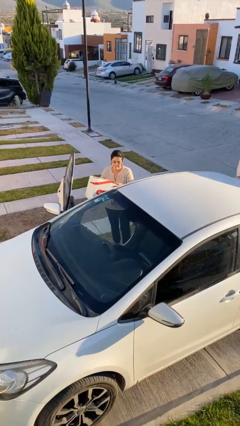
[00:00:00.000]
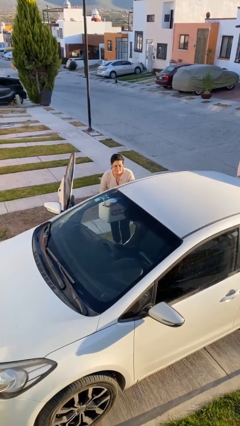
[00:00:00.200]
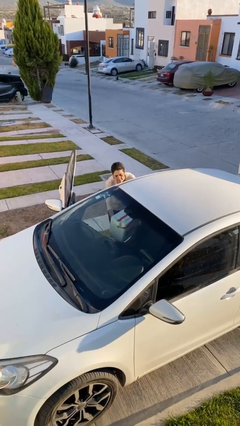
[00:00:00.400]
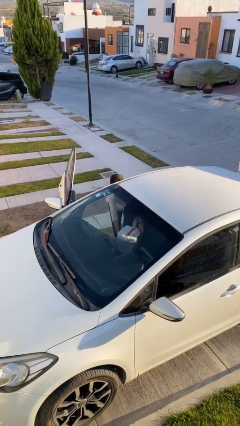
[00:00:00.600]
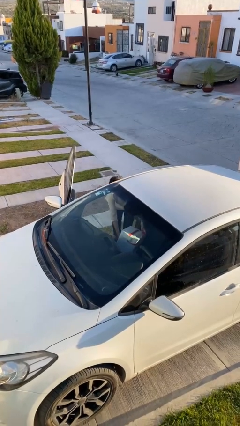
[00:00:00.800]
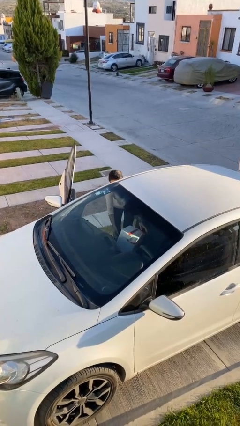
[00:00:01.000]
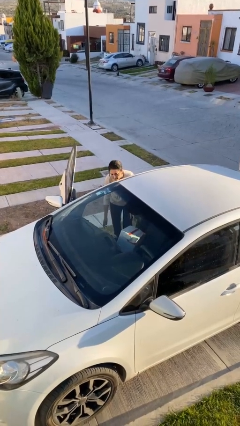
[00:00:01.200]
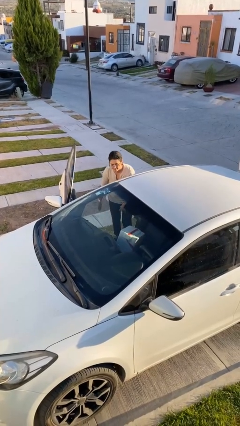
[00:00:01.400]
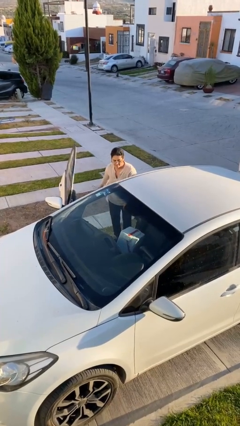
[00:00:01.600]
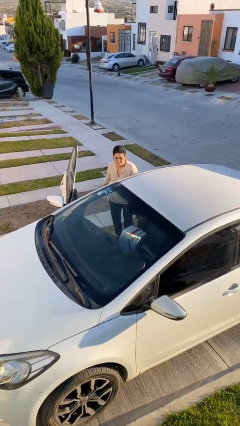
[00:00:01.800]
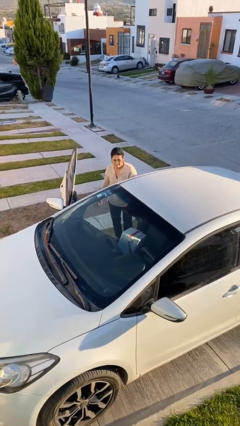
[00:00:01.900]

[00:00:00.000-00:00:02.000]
person loads car

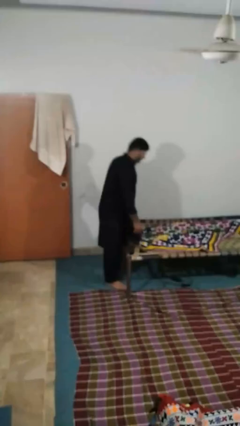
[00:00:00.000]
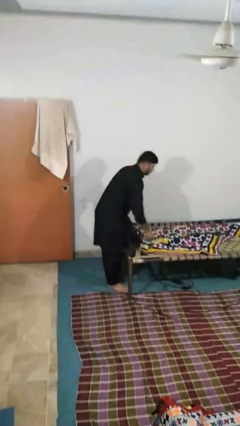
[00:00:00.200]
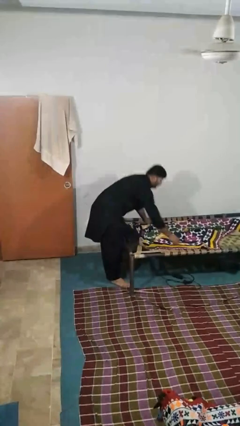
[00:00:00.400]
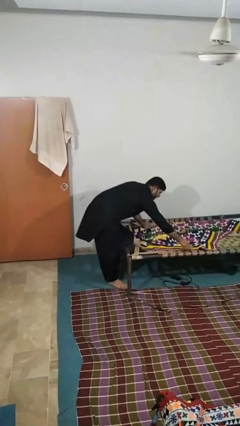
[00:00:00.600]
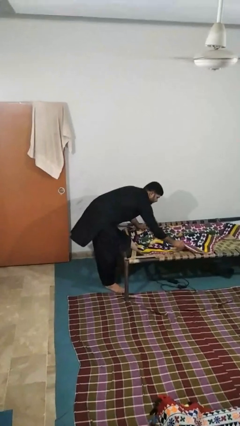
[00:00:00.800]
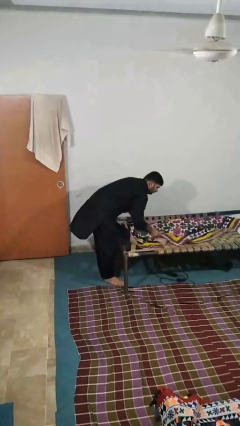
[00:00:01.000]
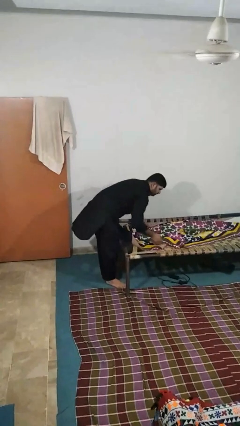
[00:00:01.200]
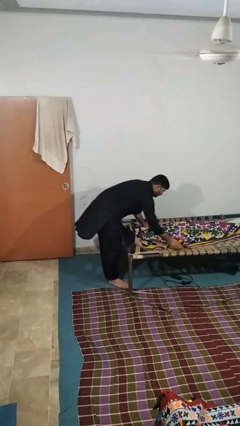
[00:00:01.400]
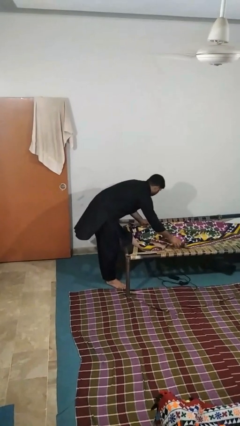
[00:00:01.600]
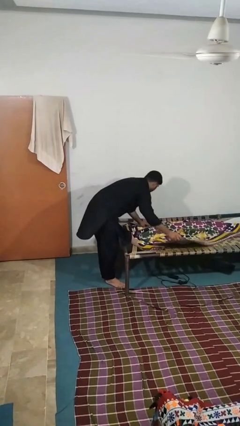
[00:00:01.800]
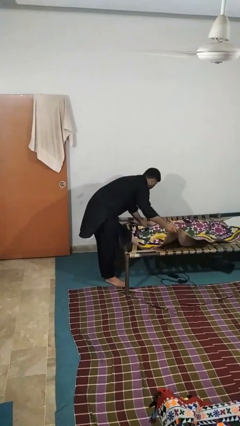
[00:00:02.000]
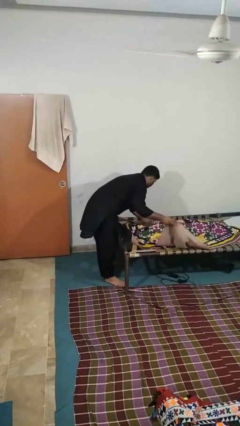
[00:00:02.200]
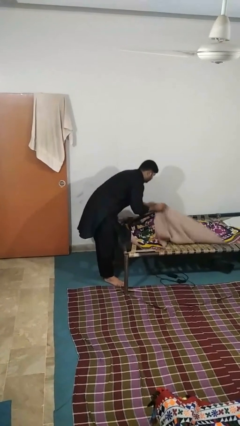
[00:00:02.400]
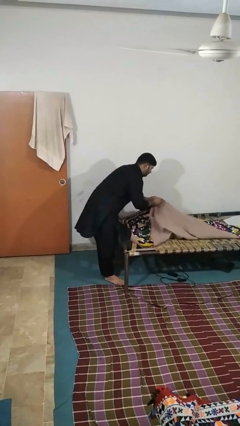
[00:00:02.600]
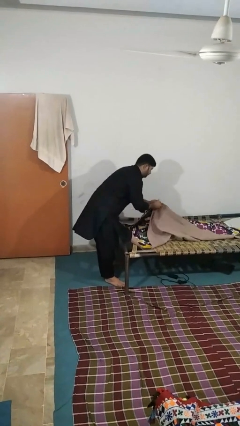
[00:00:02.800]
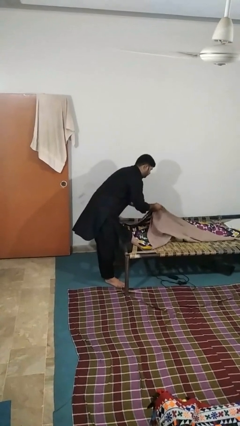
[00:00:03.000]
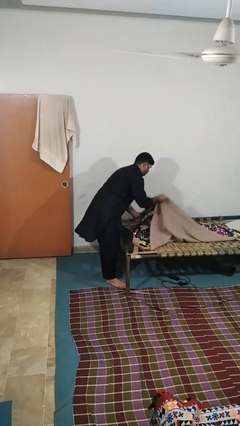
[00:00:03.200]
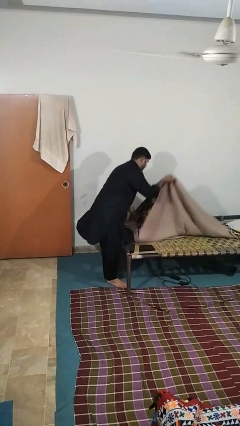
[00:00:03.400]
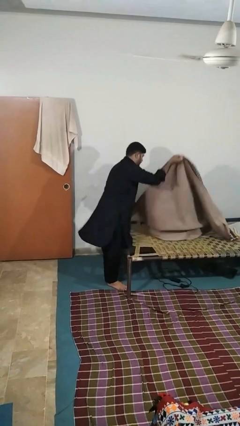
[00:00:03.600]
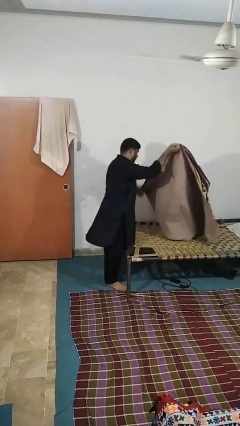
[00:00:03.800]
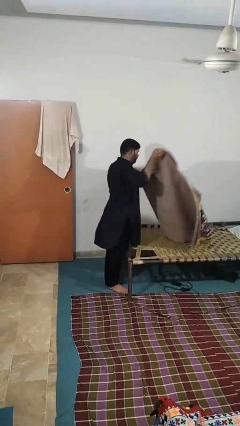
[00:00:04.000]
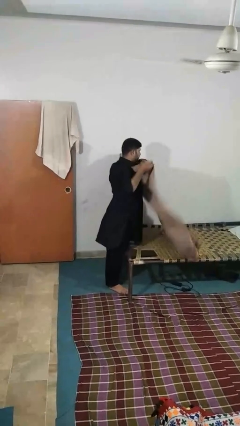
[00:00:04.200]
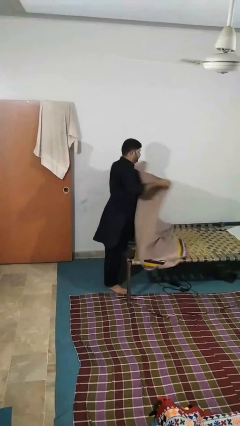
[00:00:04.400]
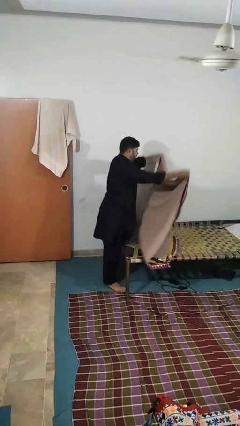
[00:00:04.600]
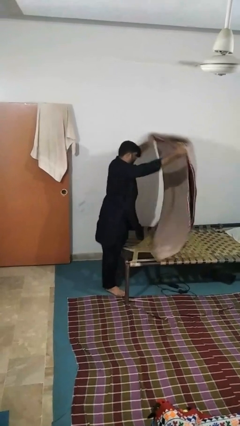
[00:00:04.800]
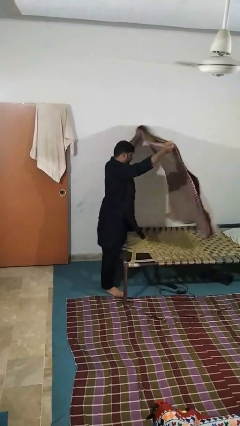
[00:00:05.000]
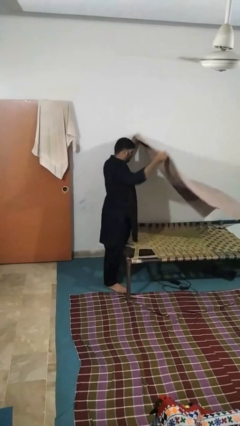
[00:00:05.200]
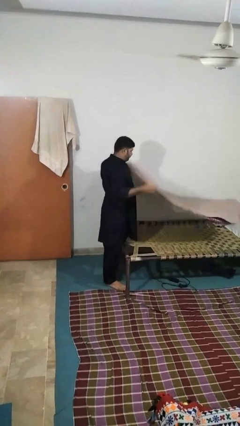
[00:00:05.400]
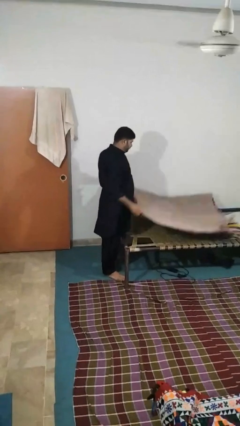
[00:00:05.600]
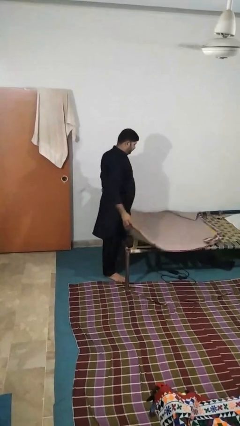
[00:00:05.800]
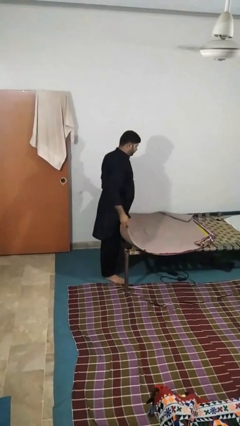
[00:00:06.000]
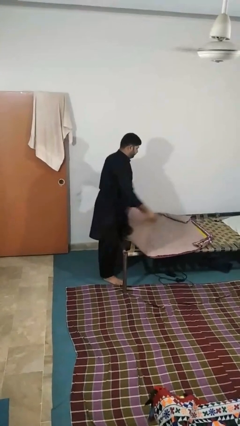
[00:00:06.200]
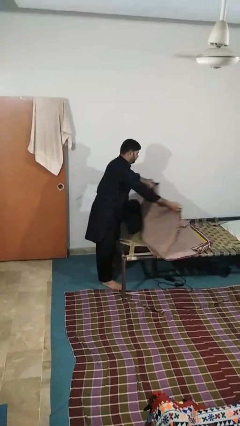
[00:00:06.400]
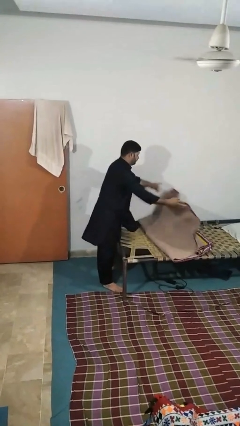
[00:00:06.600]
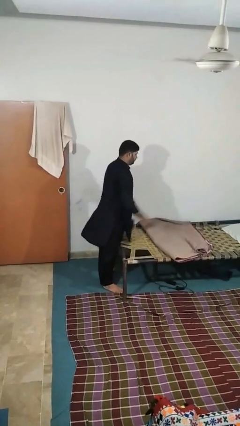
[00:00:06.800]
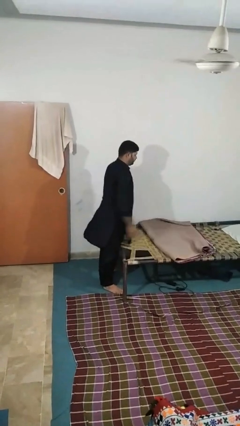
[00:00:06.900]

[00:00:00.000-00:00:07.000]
person folds blanket

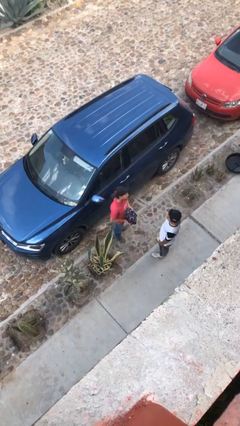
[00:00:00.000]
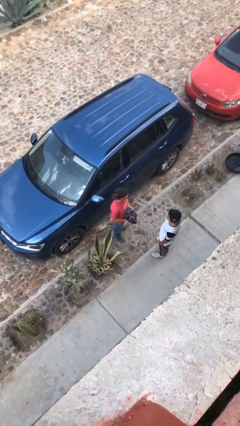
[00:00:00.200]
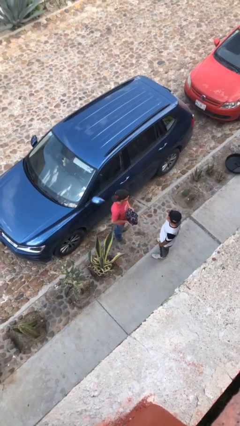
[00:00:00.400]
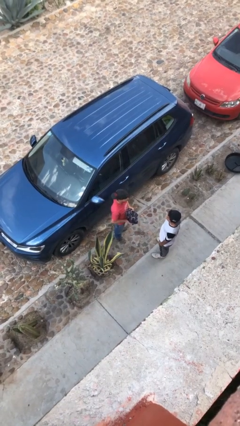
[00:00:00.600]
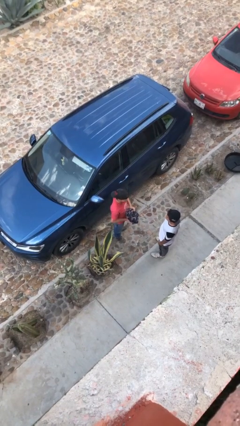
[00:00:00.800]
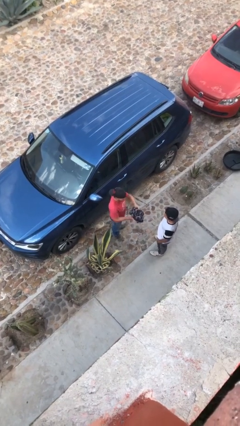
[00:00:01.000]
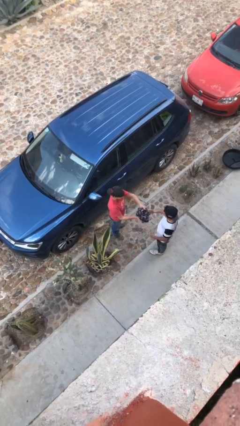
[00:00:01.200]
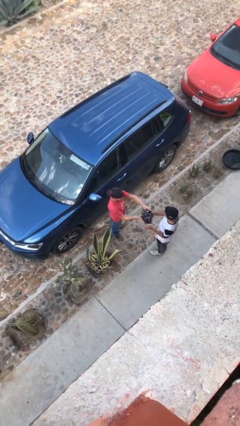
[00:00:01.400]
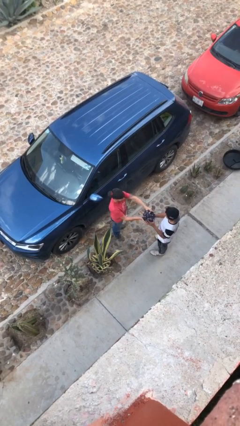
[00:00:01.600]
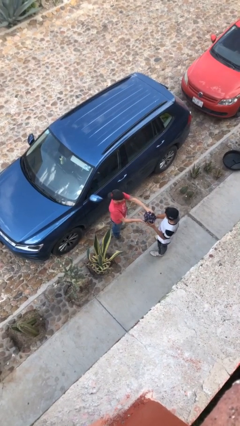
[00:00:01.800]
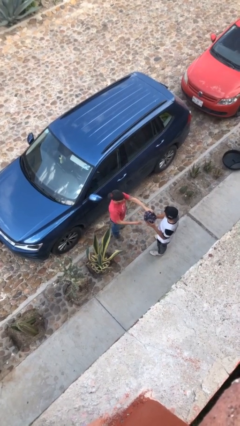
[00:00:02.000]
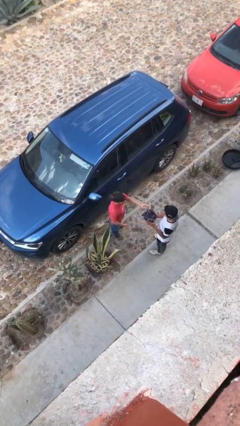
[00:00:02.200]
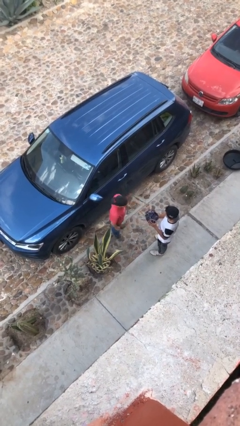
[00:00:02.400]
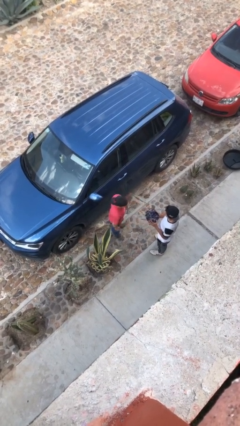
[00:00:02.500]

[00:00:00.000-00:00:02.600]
person transfers object to person

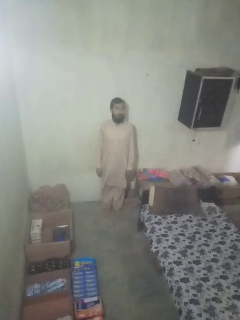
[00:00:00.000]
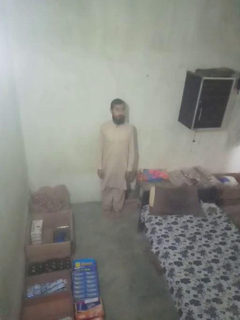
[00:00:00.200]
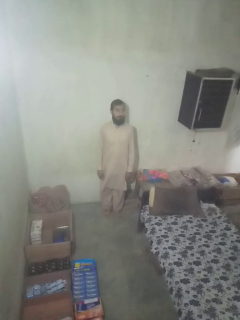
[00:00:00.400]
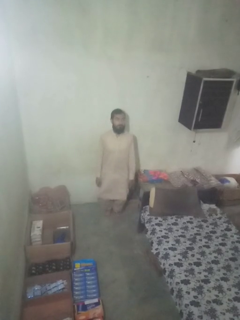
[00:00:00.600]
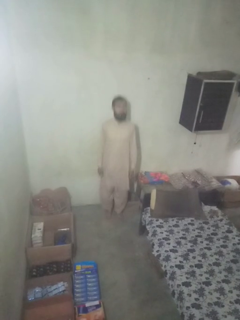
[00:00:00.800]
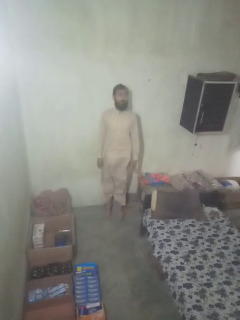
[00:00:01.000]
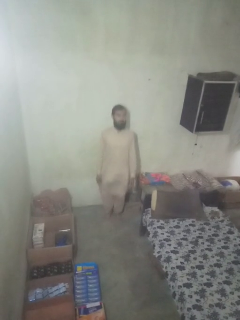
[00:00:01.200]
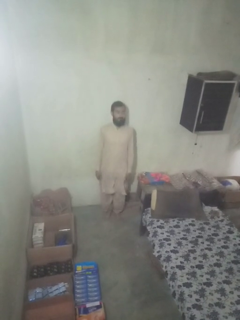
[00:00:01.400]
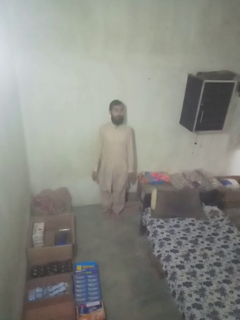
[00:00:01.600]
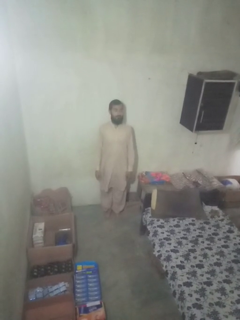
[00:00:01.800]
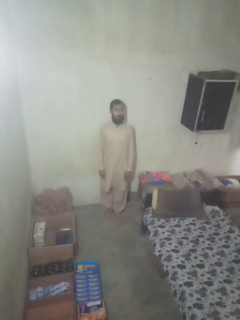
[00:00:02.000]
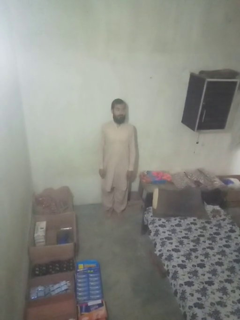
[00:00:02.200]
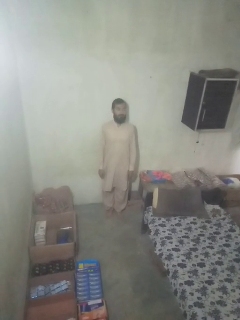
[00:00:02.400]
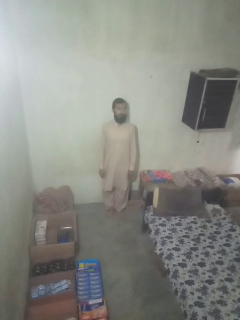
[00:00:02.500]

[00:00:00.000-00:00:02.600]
person jumps

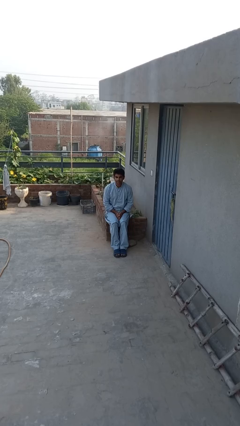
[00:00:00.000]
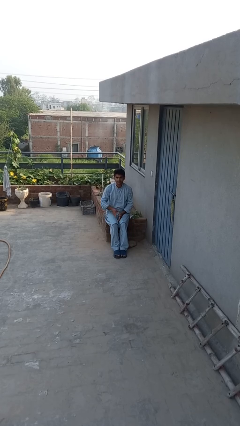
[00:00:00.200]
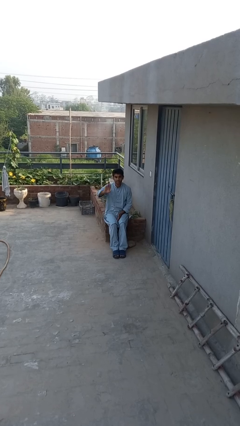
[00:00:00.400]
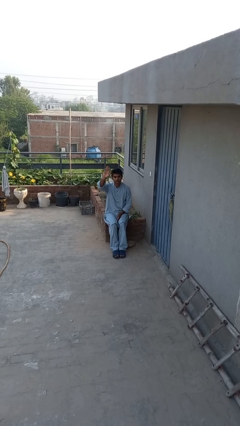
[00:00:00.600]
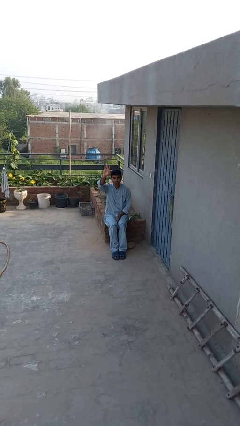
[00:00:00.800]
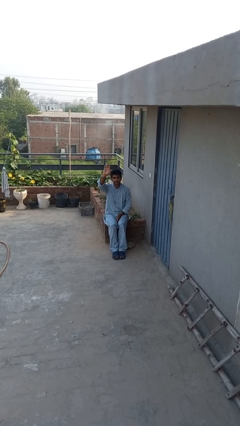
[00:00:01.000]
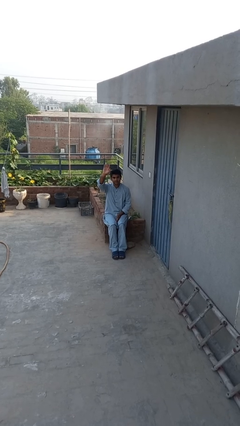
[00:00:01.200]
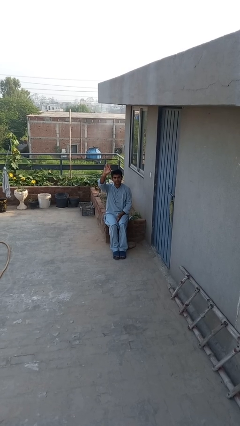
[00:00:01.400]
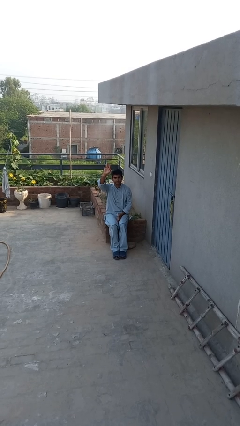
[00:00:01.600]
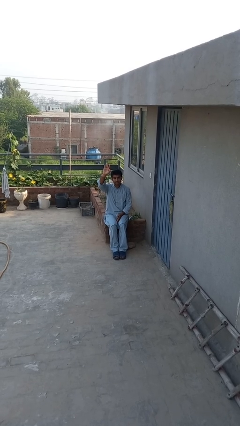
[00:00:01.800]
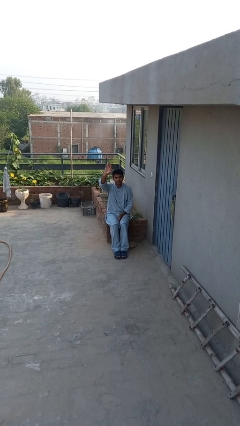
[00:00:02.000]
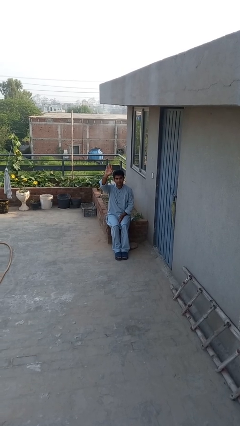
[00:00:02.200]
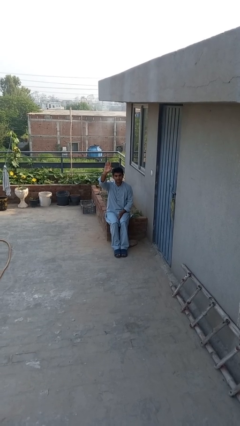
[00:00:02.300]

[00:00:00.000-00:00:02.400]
person gestures raise hand

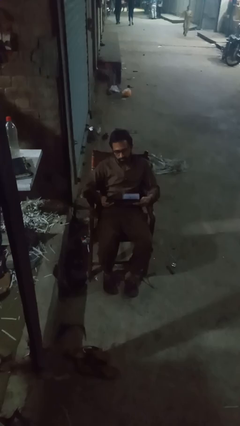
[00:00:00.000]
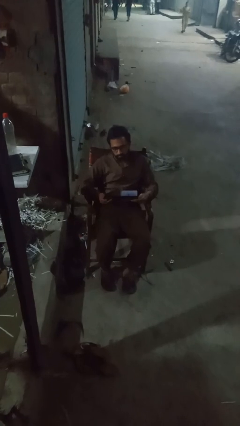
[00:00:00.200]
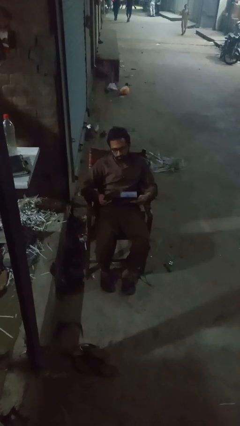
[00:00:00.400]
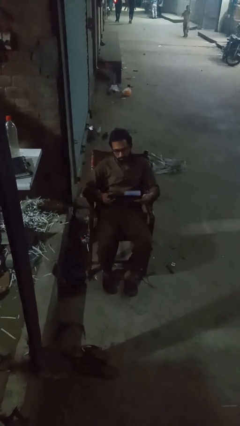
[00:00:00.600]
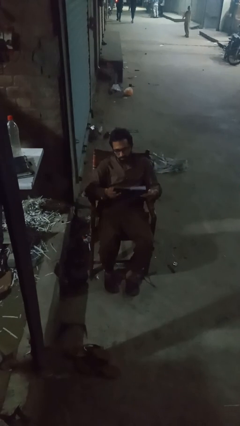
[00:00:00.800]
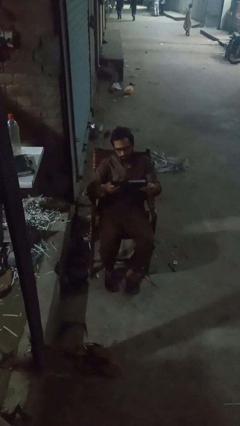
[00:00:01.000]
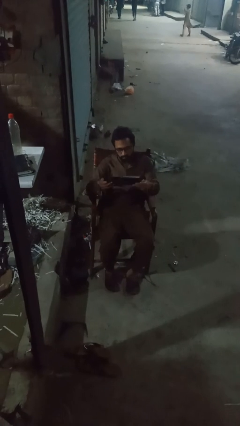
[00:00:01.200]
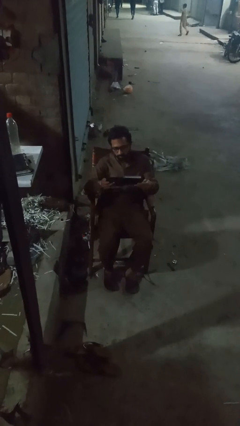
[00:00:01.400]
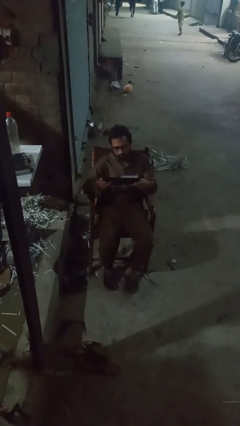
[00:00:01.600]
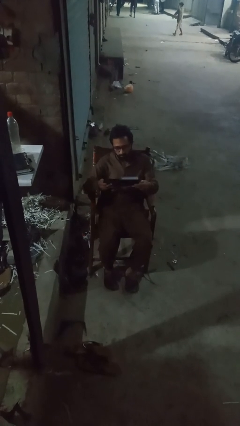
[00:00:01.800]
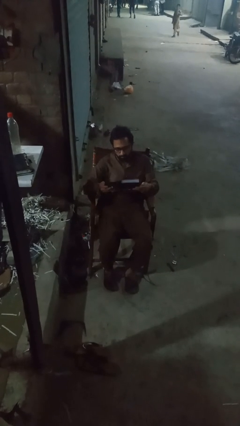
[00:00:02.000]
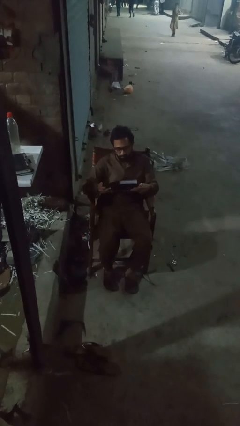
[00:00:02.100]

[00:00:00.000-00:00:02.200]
person interacts with handheld game
